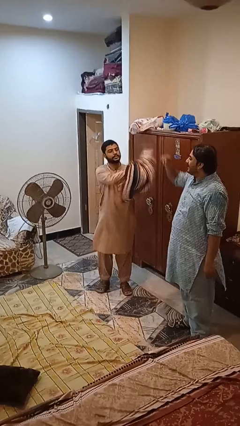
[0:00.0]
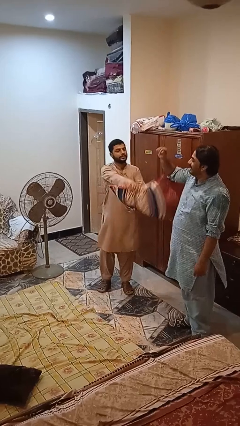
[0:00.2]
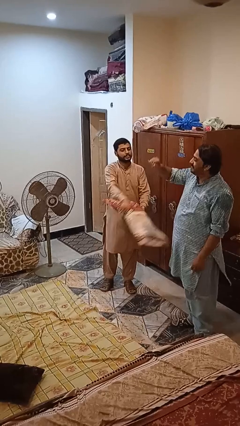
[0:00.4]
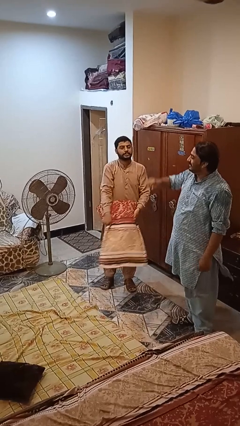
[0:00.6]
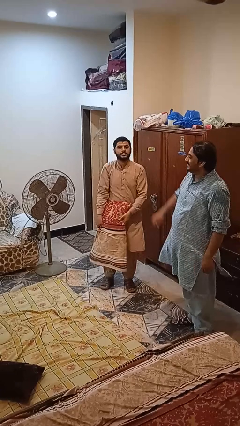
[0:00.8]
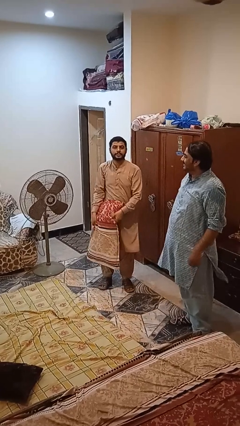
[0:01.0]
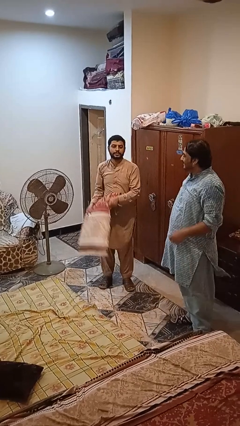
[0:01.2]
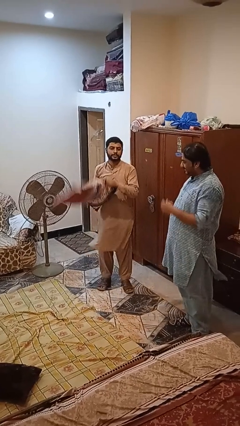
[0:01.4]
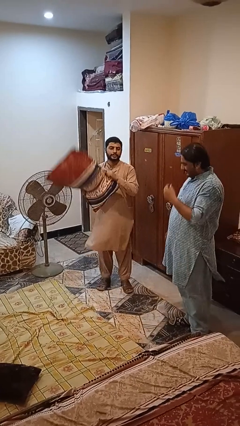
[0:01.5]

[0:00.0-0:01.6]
person hits person with pillow

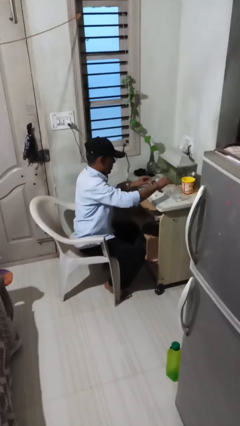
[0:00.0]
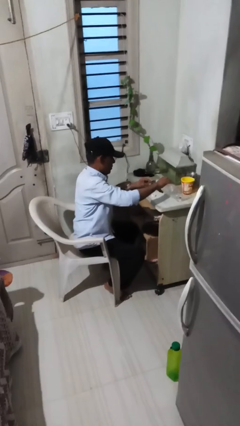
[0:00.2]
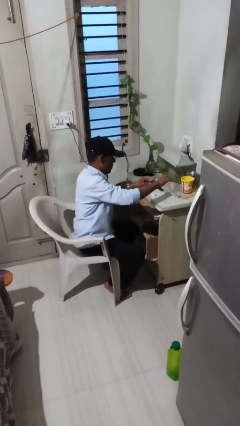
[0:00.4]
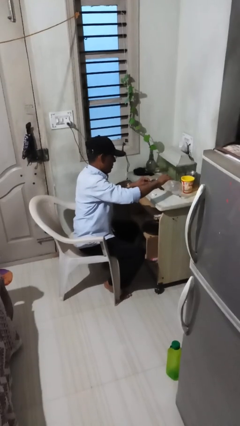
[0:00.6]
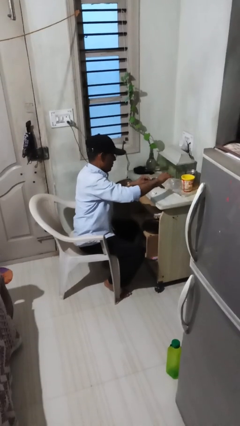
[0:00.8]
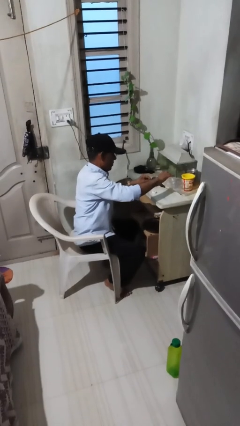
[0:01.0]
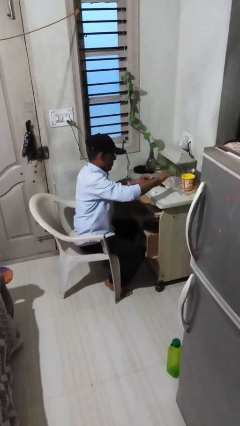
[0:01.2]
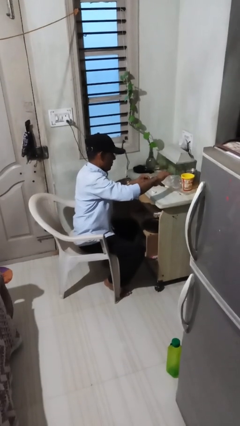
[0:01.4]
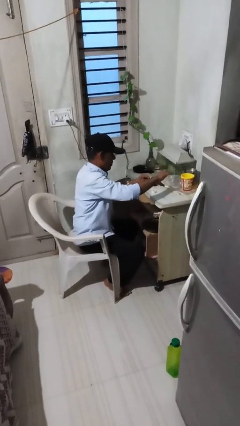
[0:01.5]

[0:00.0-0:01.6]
person pours liquid into cup

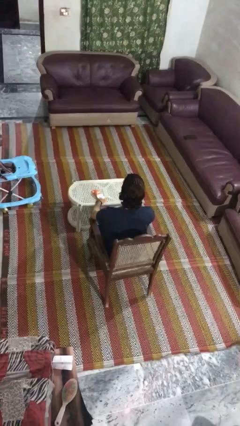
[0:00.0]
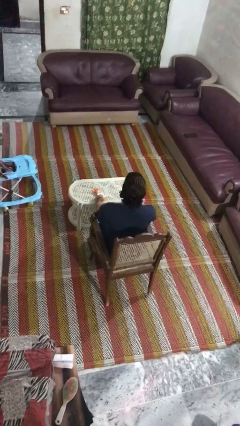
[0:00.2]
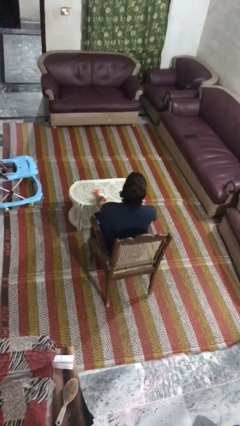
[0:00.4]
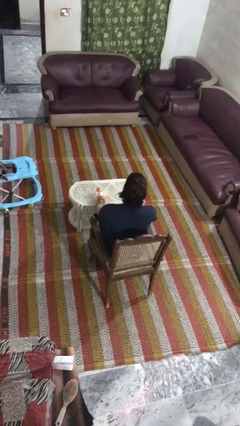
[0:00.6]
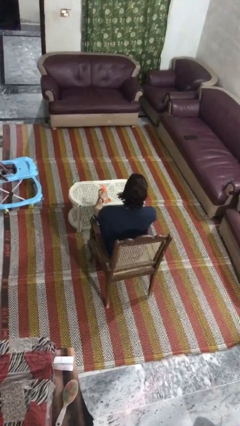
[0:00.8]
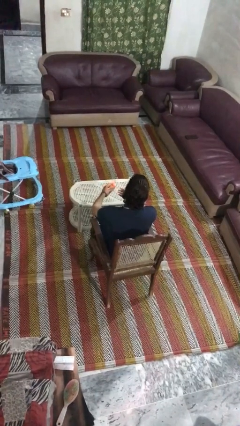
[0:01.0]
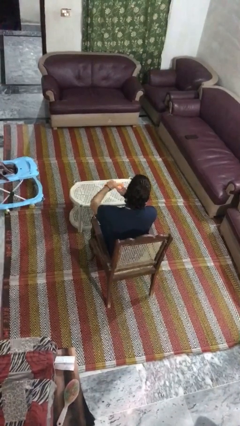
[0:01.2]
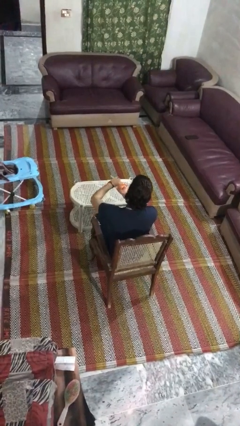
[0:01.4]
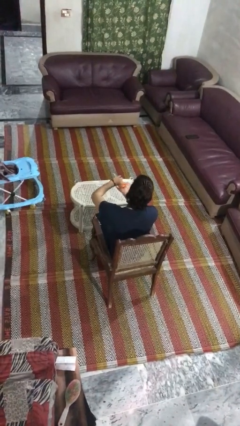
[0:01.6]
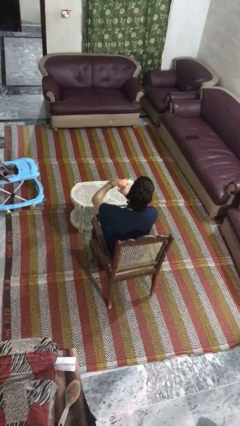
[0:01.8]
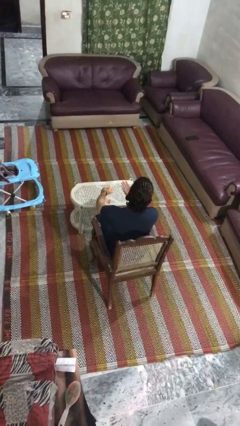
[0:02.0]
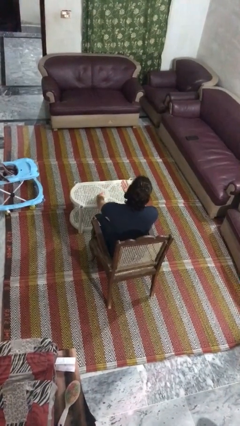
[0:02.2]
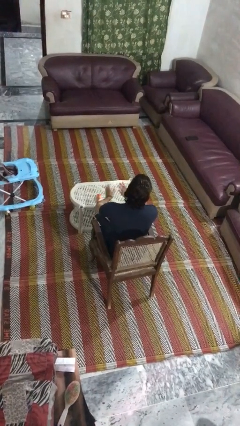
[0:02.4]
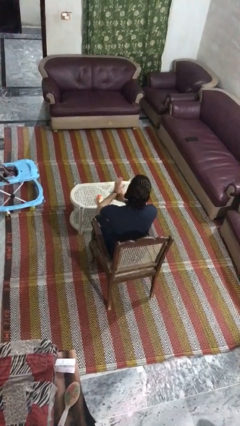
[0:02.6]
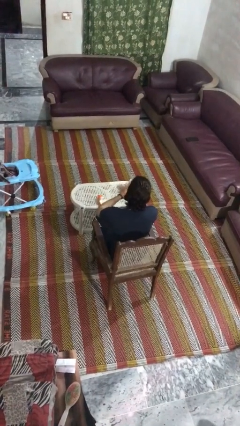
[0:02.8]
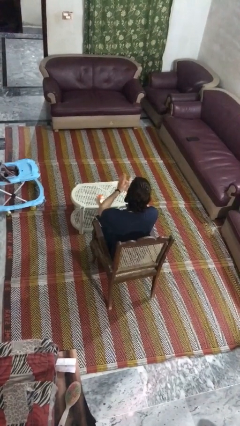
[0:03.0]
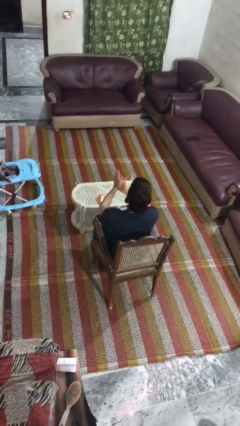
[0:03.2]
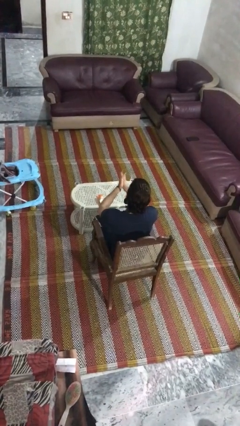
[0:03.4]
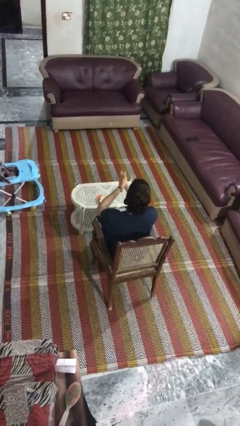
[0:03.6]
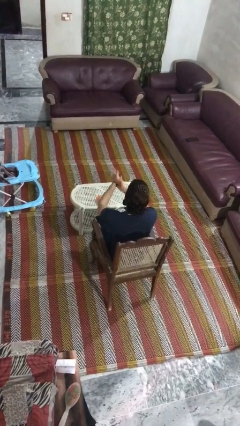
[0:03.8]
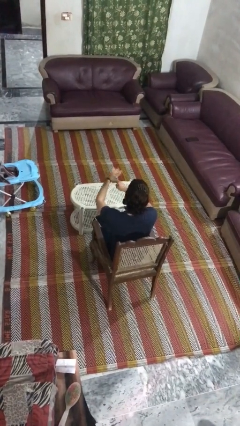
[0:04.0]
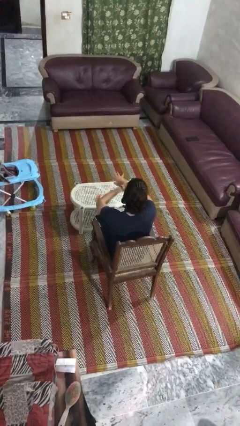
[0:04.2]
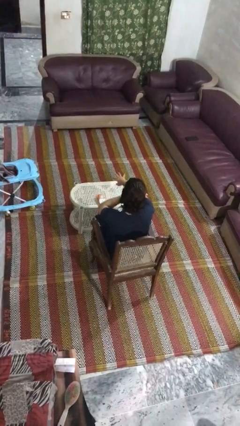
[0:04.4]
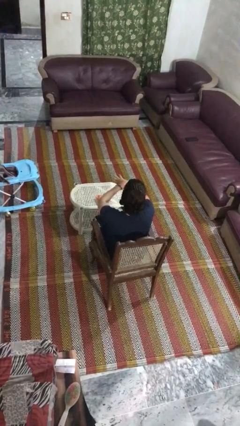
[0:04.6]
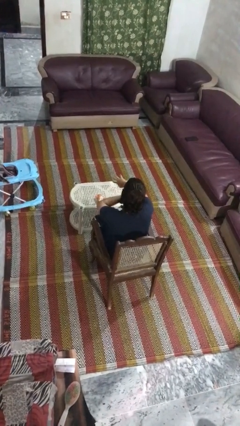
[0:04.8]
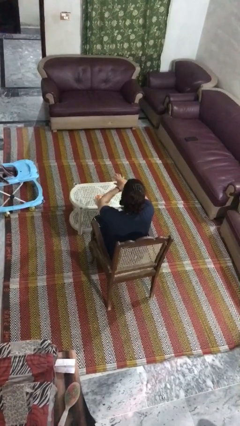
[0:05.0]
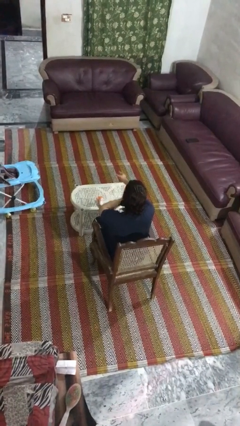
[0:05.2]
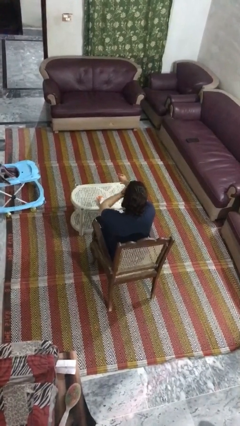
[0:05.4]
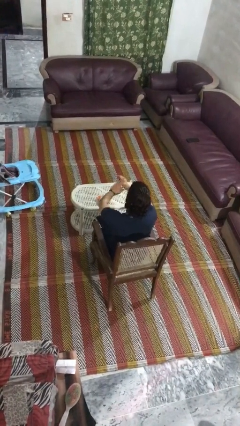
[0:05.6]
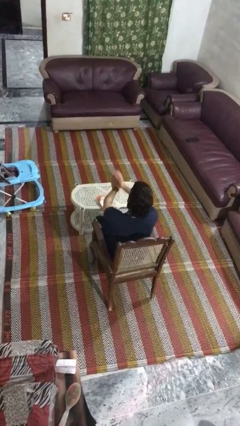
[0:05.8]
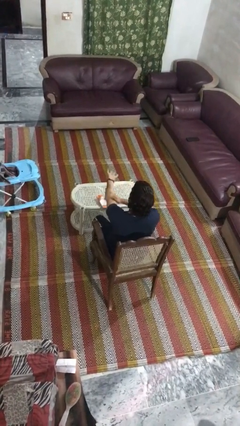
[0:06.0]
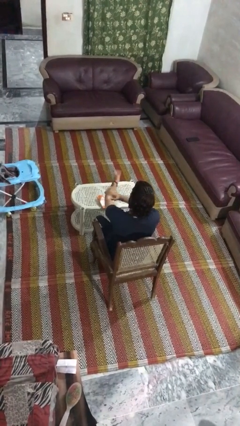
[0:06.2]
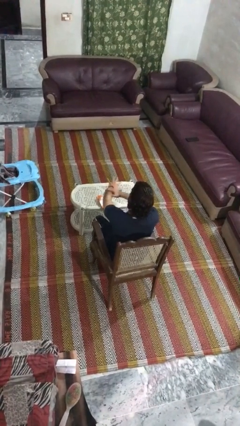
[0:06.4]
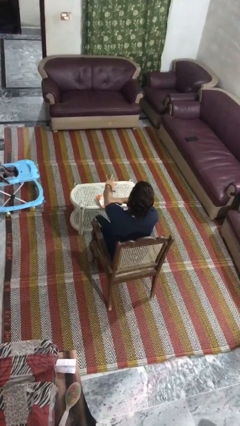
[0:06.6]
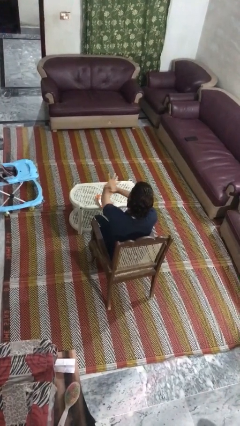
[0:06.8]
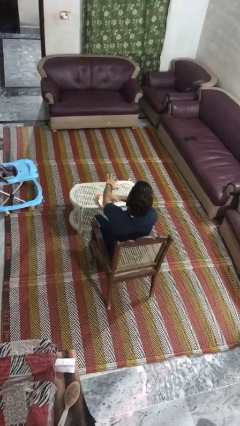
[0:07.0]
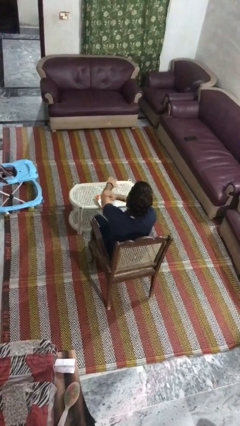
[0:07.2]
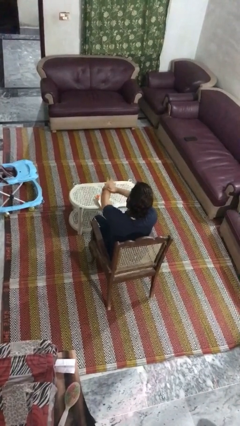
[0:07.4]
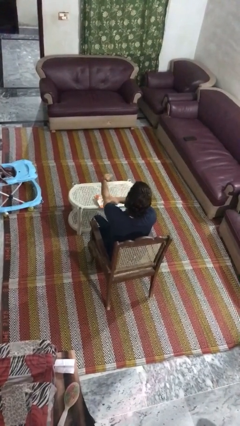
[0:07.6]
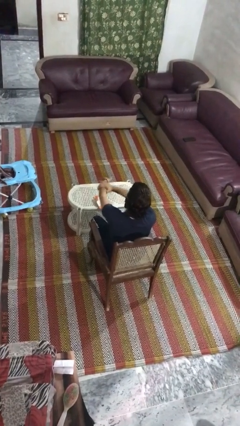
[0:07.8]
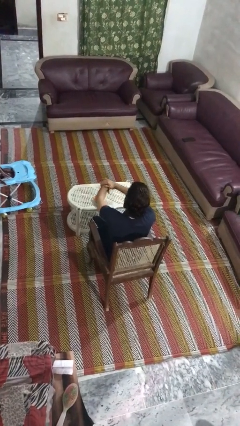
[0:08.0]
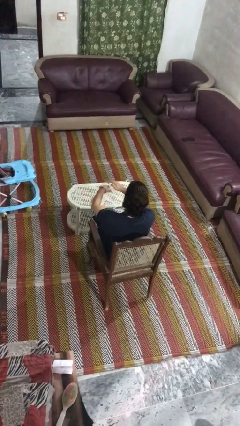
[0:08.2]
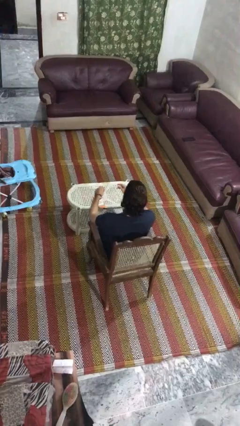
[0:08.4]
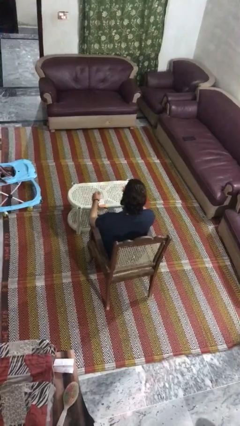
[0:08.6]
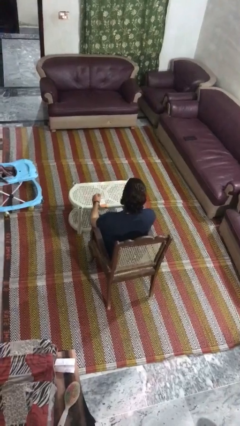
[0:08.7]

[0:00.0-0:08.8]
person applies sunscreen

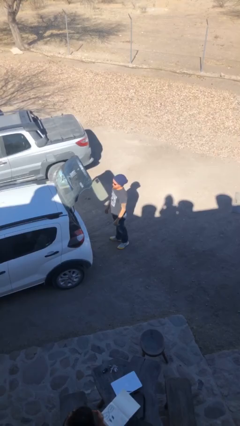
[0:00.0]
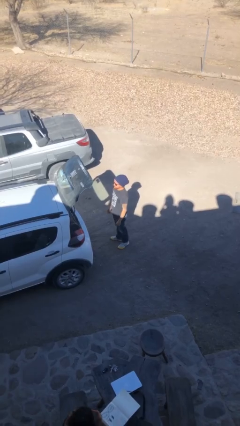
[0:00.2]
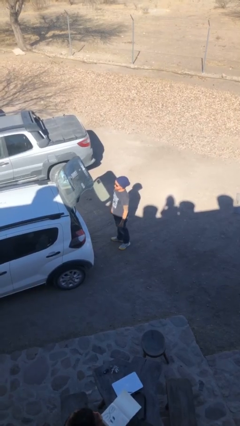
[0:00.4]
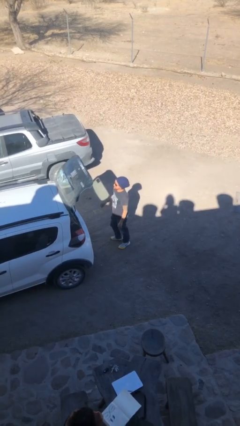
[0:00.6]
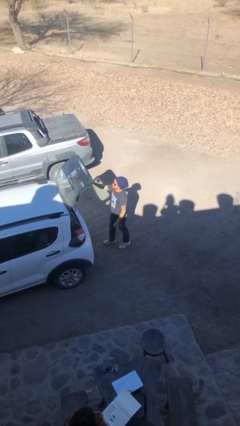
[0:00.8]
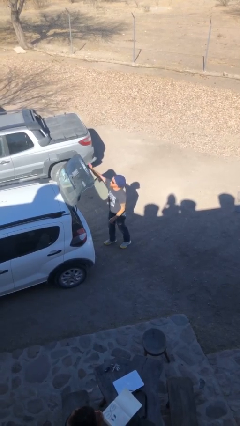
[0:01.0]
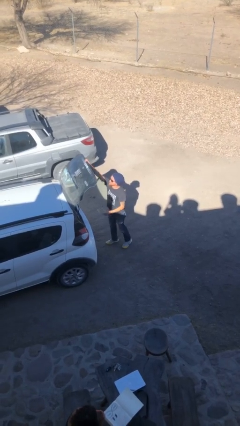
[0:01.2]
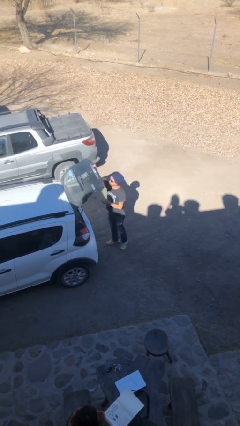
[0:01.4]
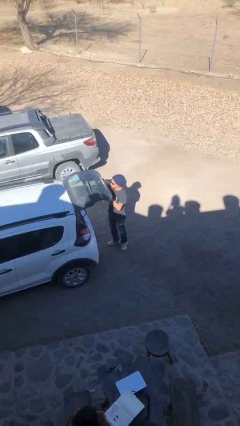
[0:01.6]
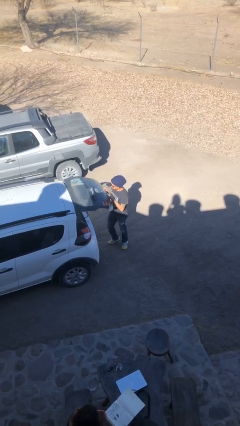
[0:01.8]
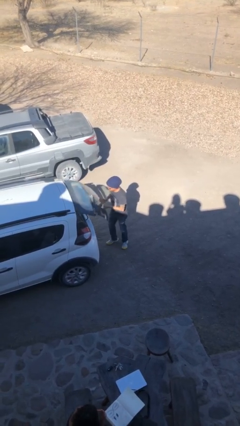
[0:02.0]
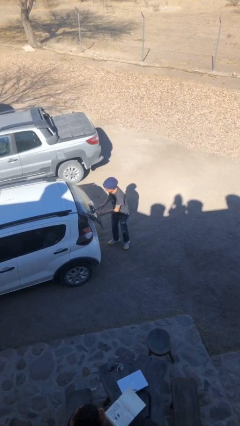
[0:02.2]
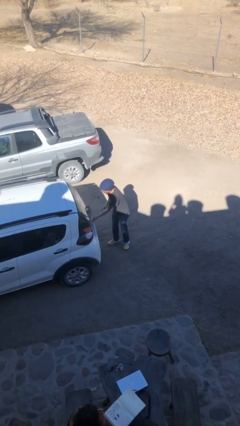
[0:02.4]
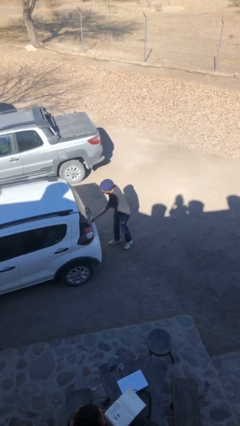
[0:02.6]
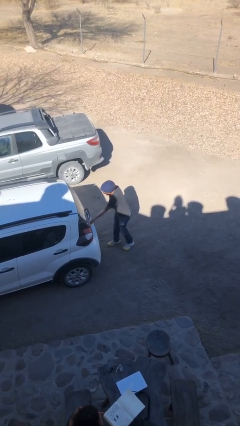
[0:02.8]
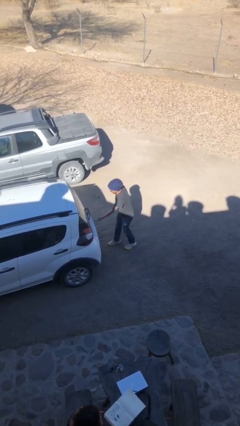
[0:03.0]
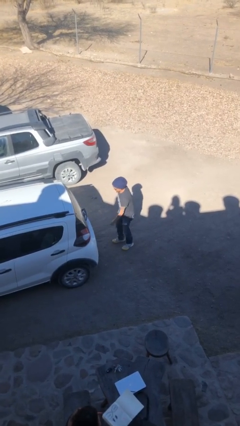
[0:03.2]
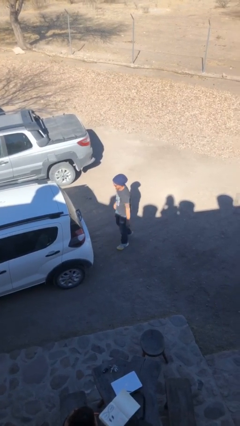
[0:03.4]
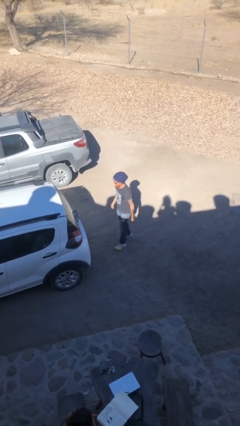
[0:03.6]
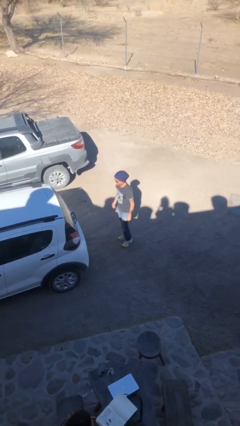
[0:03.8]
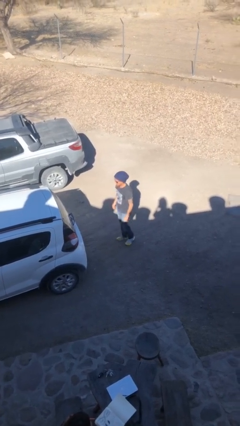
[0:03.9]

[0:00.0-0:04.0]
person closes car trunk

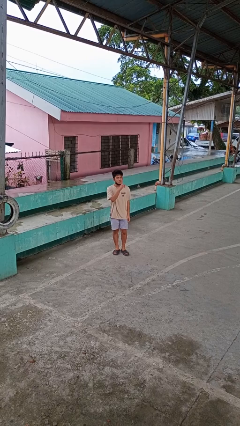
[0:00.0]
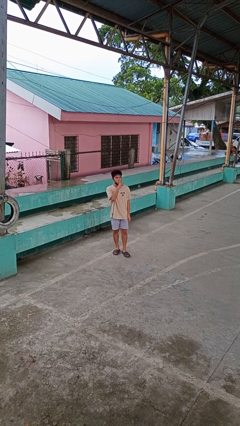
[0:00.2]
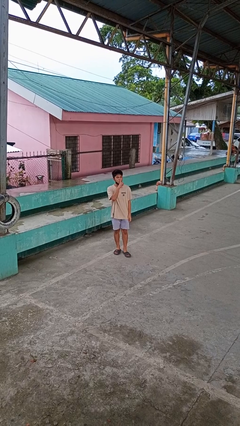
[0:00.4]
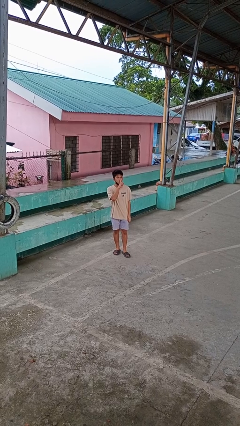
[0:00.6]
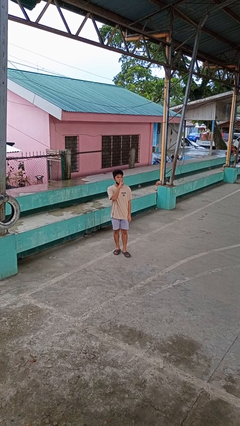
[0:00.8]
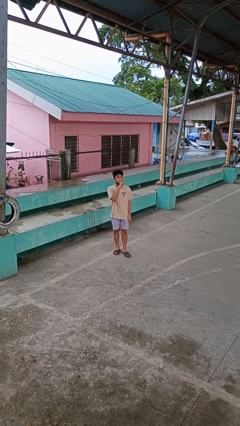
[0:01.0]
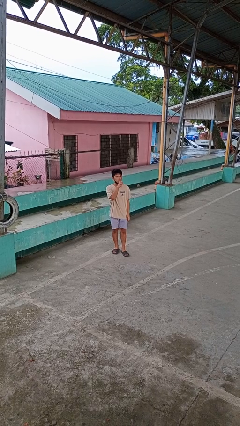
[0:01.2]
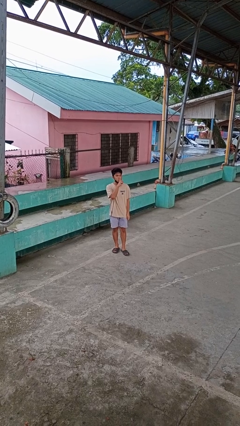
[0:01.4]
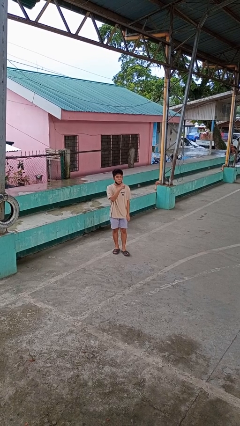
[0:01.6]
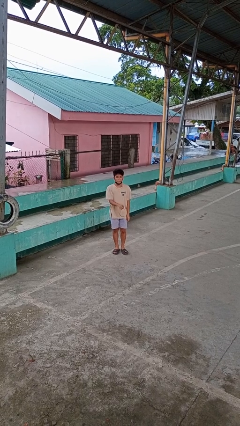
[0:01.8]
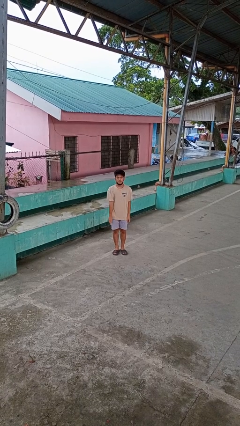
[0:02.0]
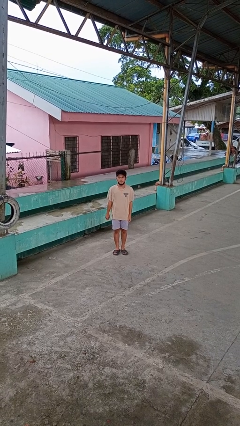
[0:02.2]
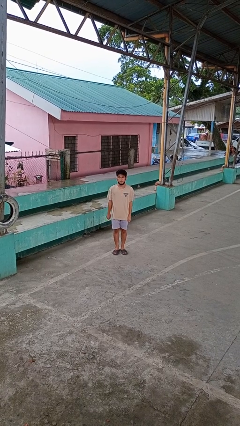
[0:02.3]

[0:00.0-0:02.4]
person gestures be quiet
